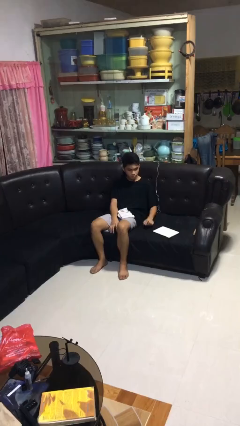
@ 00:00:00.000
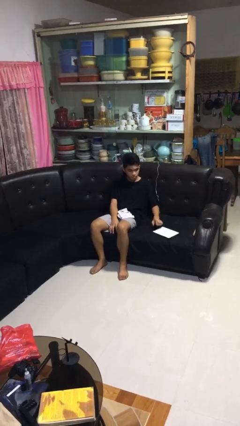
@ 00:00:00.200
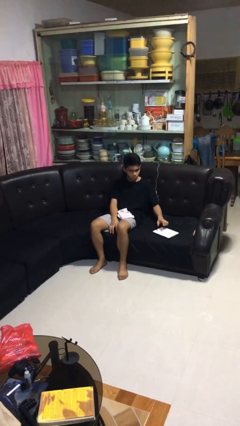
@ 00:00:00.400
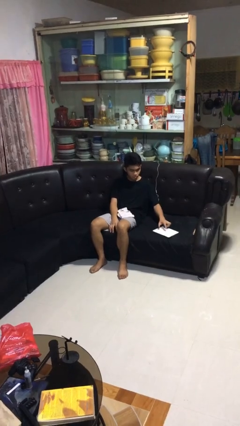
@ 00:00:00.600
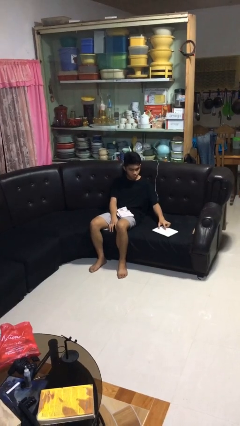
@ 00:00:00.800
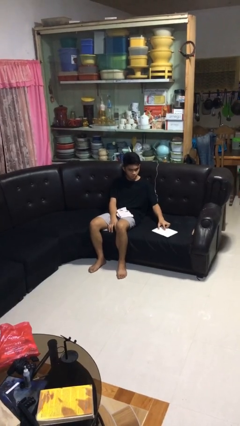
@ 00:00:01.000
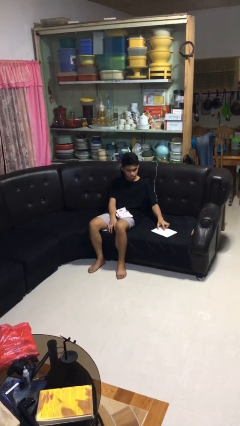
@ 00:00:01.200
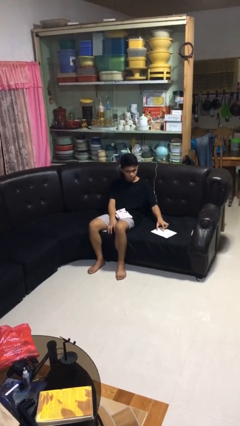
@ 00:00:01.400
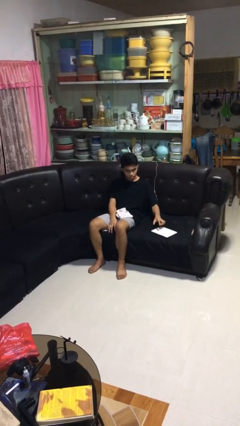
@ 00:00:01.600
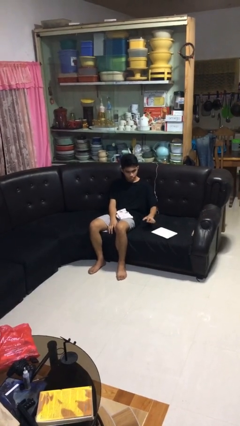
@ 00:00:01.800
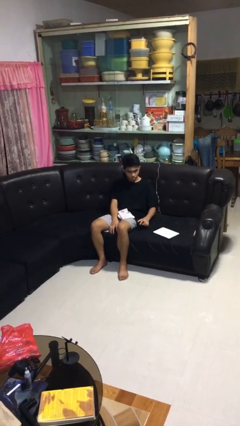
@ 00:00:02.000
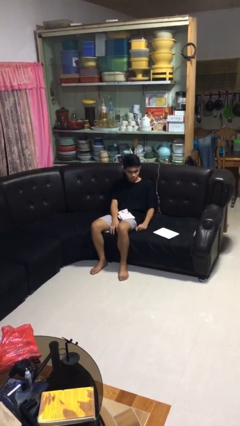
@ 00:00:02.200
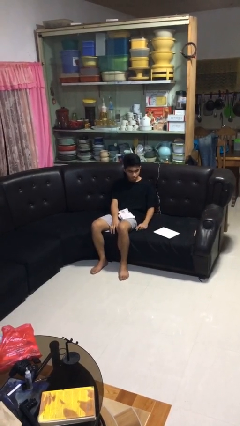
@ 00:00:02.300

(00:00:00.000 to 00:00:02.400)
person taps object with finger

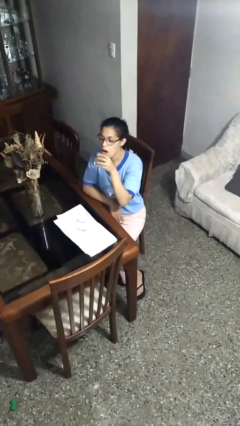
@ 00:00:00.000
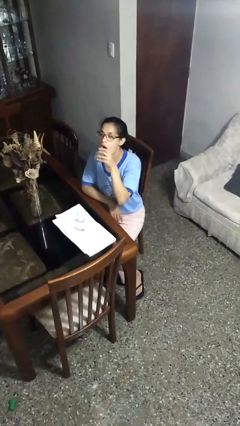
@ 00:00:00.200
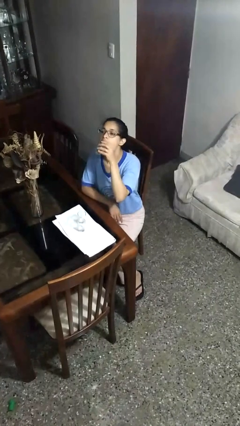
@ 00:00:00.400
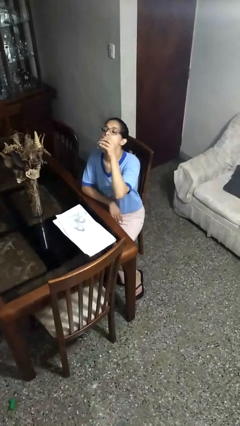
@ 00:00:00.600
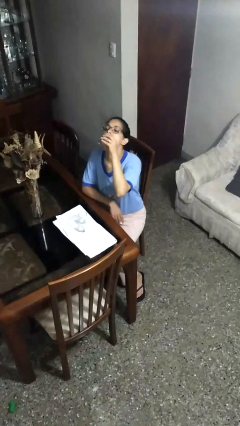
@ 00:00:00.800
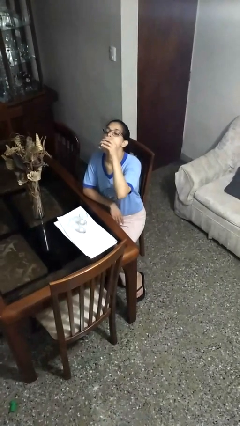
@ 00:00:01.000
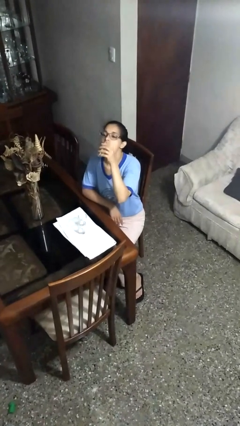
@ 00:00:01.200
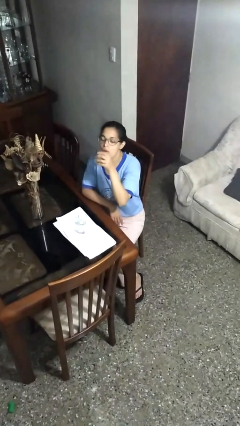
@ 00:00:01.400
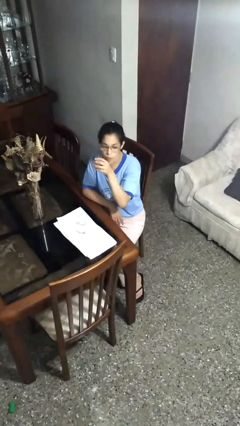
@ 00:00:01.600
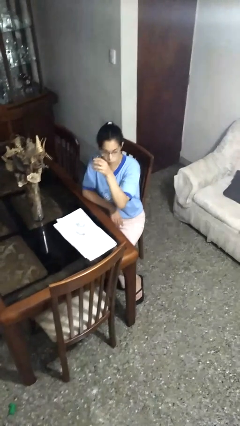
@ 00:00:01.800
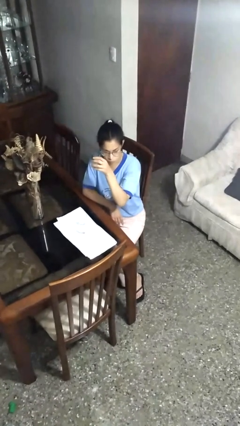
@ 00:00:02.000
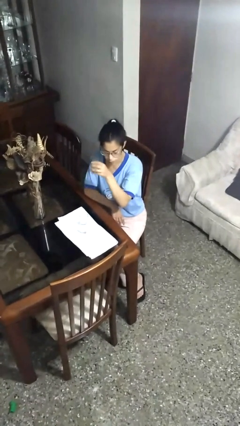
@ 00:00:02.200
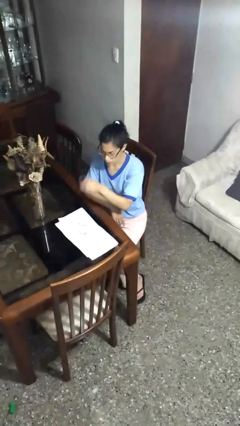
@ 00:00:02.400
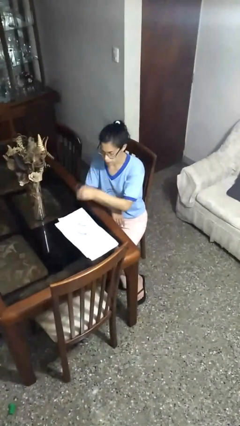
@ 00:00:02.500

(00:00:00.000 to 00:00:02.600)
person drinks from shotglass

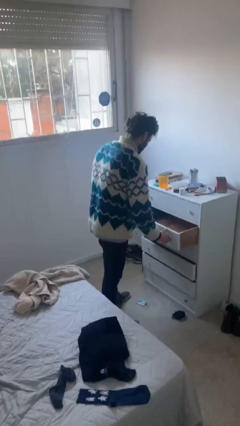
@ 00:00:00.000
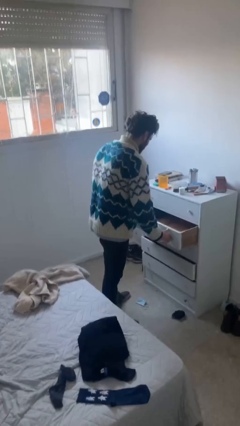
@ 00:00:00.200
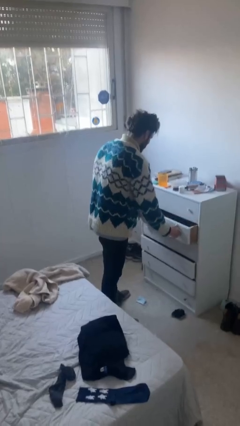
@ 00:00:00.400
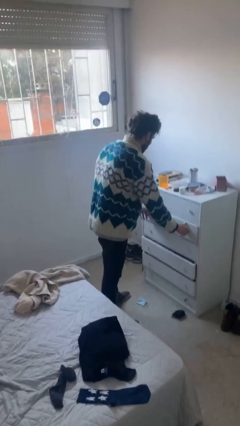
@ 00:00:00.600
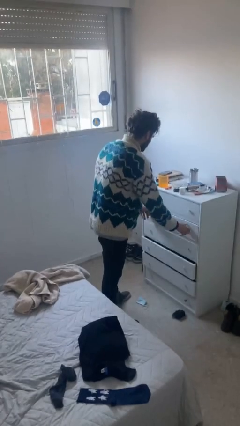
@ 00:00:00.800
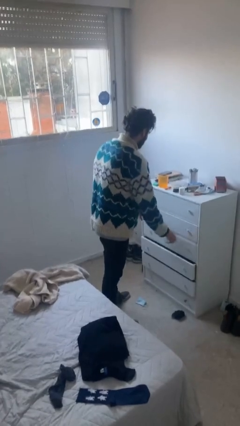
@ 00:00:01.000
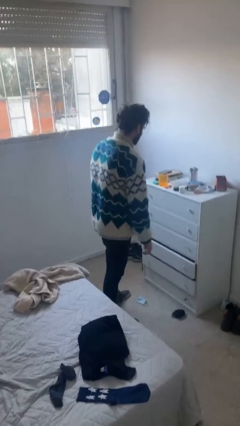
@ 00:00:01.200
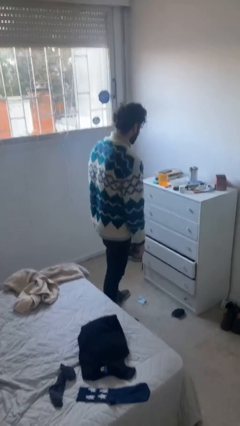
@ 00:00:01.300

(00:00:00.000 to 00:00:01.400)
person closes dresser drawer

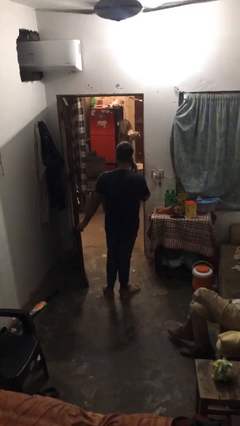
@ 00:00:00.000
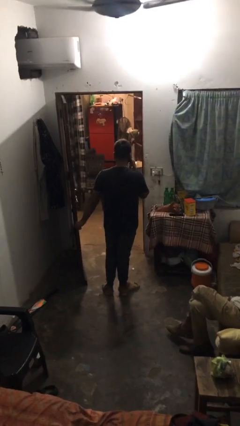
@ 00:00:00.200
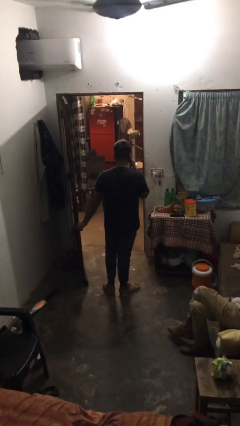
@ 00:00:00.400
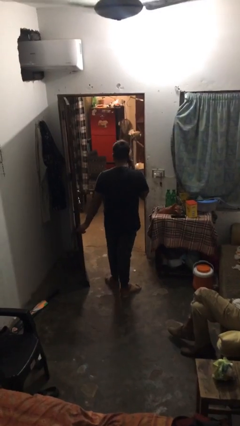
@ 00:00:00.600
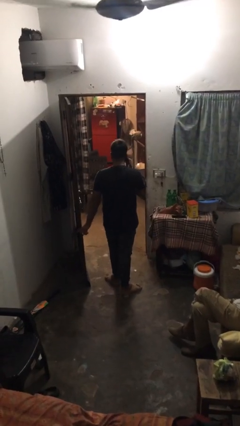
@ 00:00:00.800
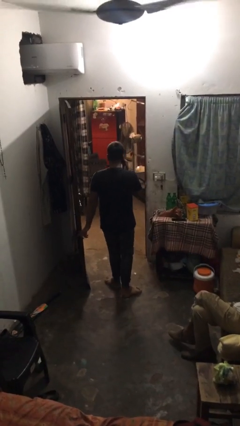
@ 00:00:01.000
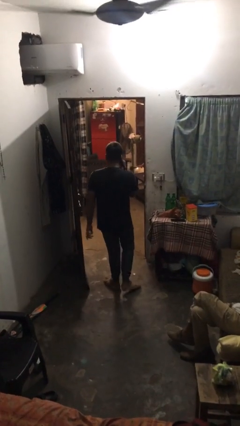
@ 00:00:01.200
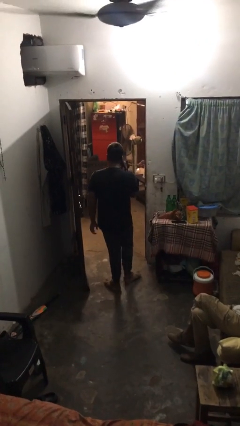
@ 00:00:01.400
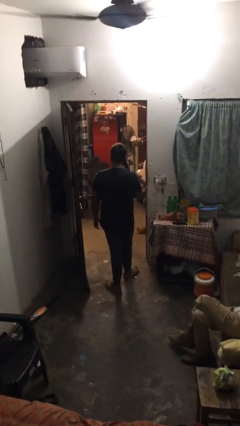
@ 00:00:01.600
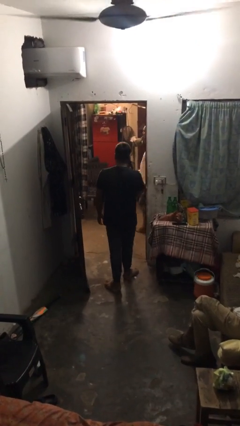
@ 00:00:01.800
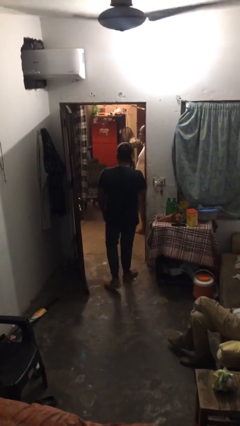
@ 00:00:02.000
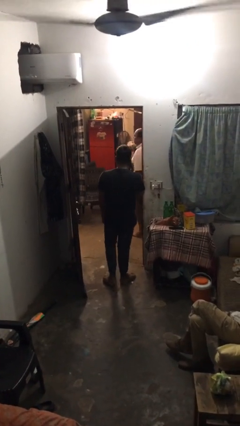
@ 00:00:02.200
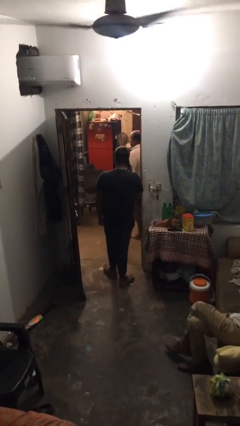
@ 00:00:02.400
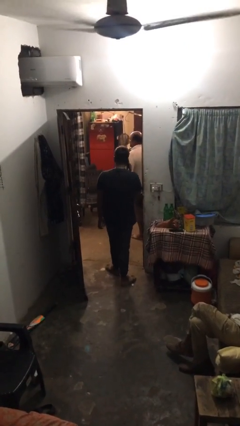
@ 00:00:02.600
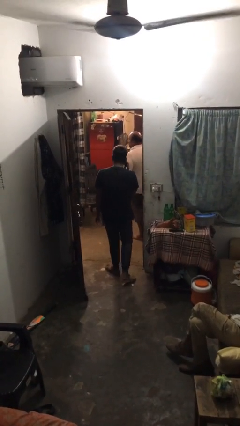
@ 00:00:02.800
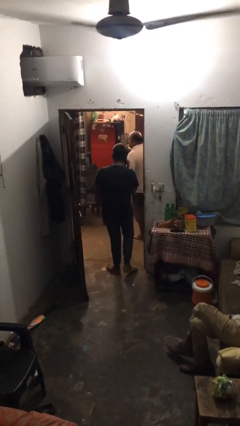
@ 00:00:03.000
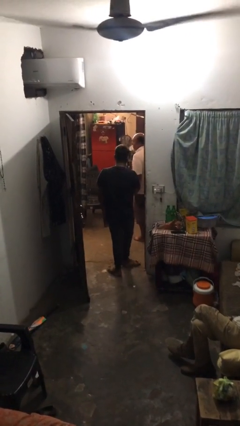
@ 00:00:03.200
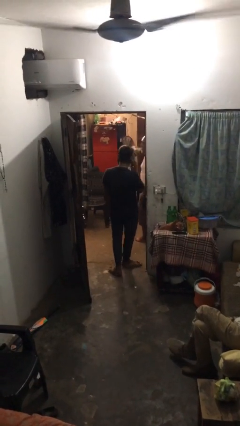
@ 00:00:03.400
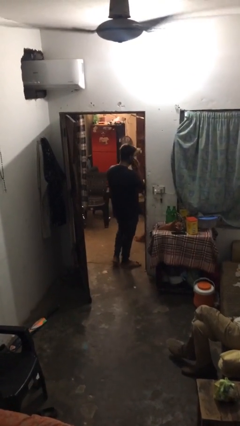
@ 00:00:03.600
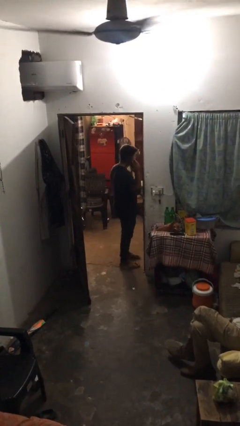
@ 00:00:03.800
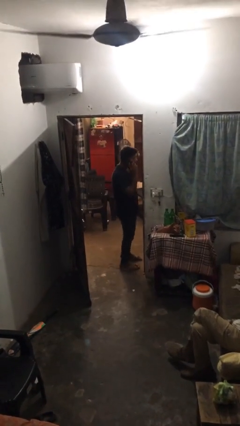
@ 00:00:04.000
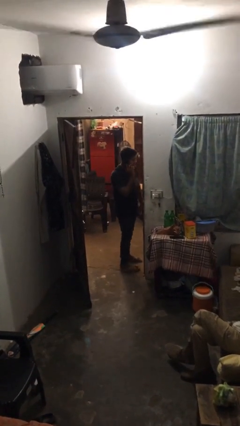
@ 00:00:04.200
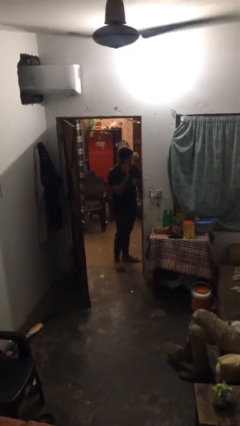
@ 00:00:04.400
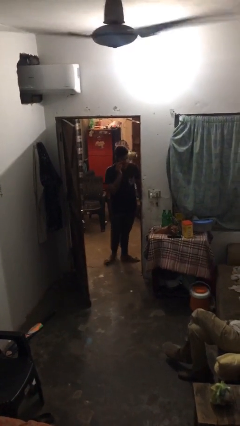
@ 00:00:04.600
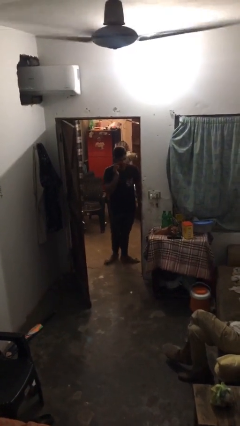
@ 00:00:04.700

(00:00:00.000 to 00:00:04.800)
person exits scene through structure

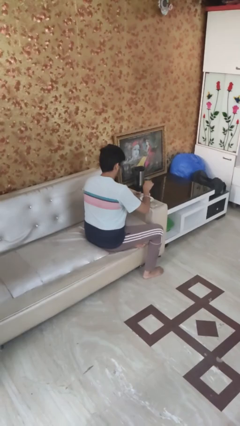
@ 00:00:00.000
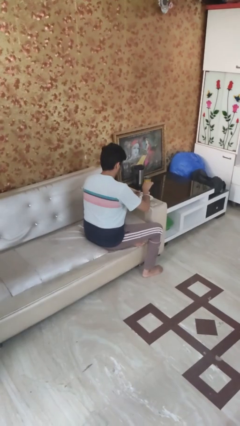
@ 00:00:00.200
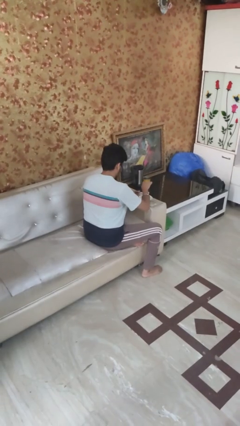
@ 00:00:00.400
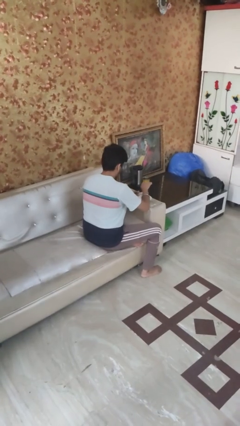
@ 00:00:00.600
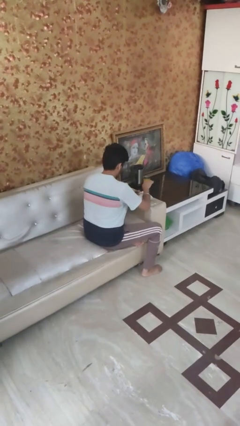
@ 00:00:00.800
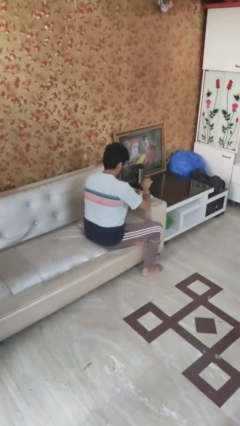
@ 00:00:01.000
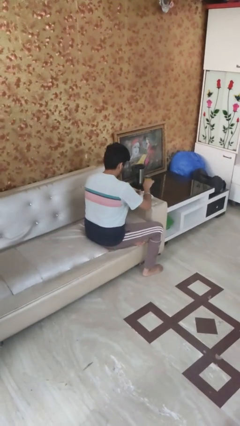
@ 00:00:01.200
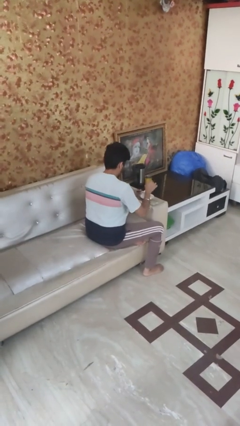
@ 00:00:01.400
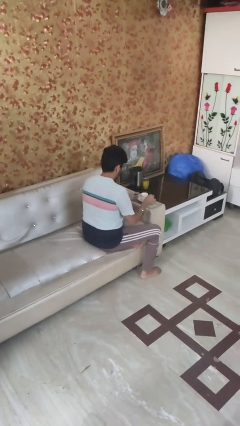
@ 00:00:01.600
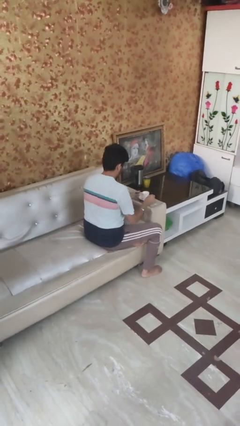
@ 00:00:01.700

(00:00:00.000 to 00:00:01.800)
person stirs mug

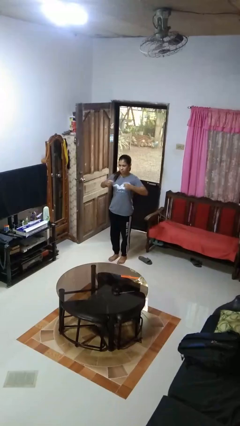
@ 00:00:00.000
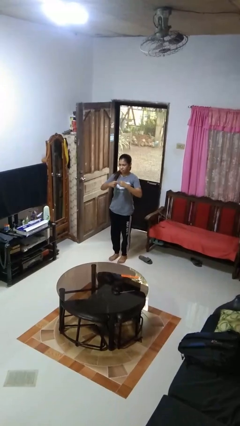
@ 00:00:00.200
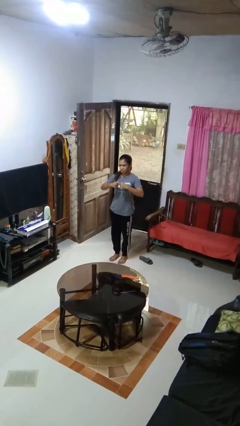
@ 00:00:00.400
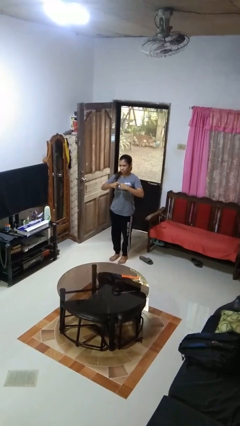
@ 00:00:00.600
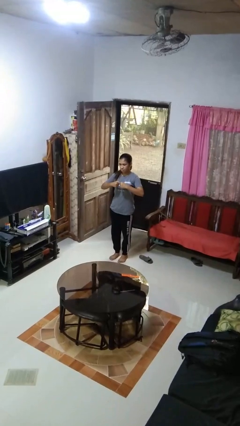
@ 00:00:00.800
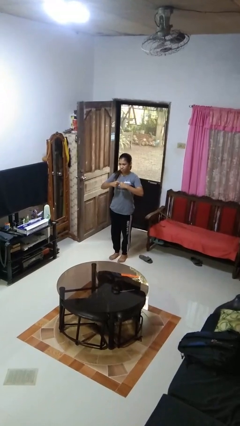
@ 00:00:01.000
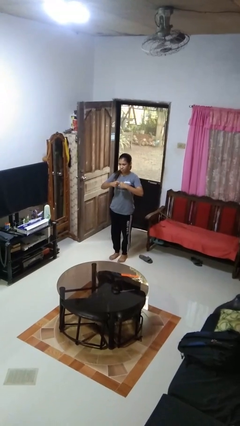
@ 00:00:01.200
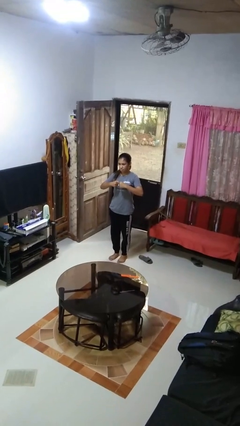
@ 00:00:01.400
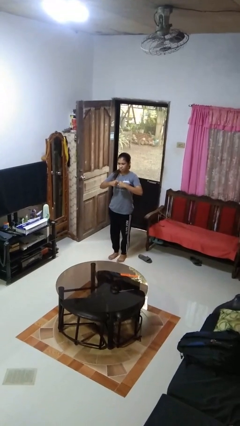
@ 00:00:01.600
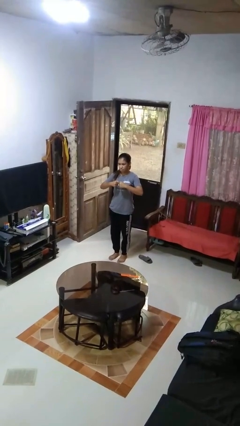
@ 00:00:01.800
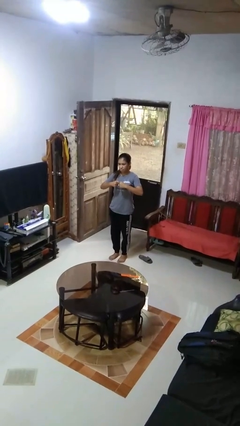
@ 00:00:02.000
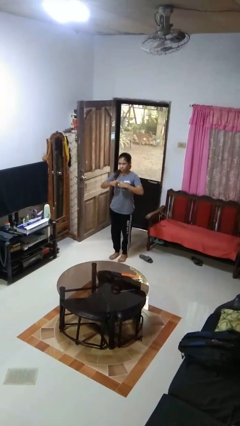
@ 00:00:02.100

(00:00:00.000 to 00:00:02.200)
person gestures zoom out

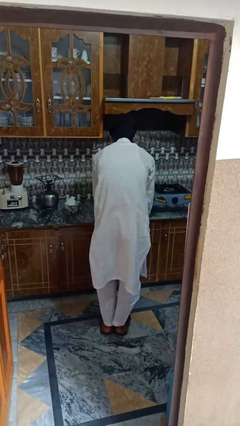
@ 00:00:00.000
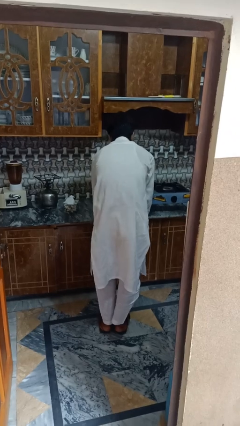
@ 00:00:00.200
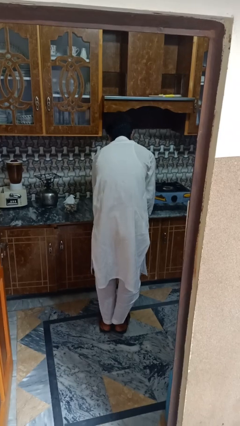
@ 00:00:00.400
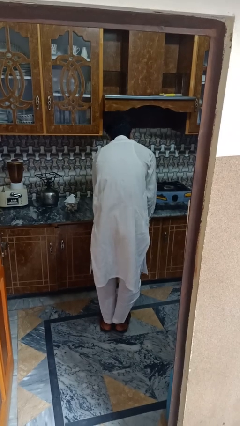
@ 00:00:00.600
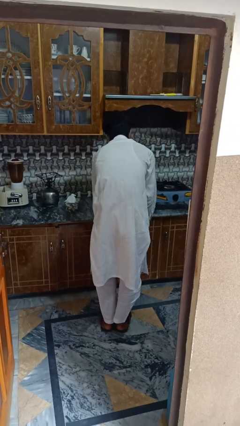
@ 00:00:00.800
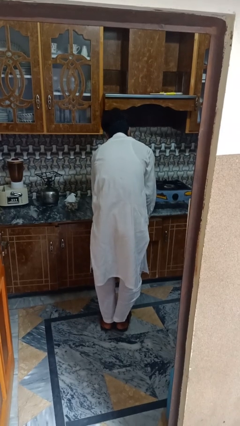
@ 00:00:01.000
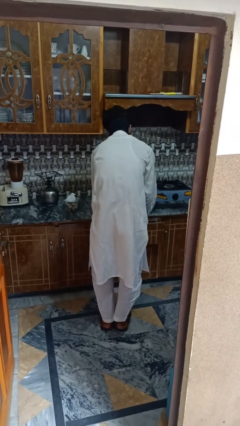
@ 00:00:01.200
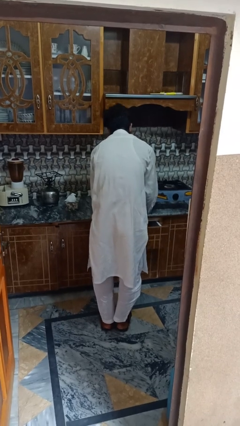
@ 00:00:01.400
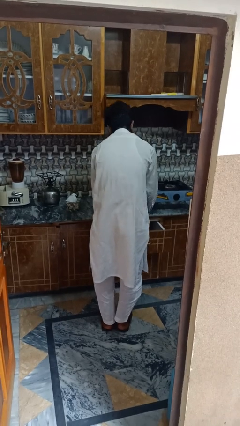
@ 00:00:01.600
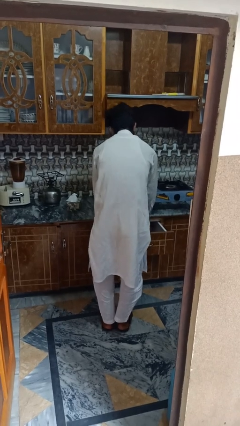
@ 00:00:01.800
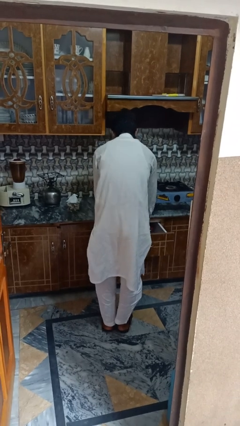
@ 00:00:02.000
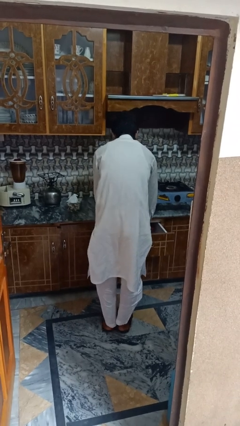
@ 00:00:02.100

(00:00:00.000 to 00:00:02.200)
person searches in kitchen drawer
